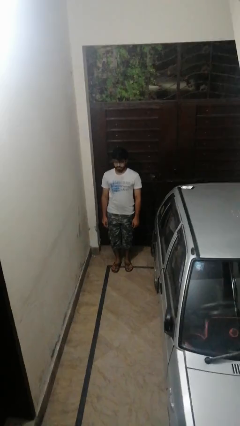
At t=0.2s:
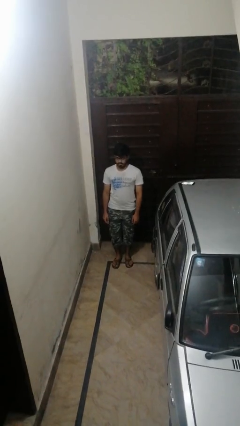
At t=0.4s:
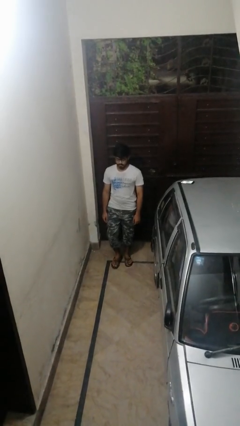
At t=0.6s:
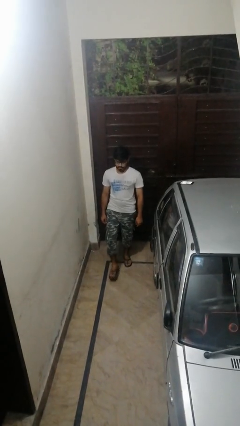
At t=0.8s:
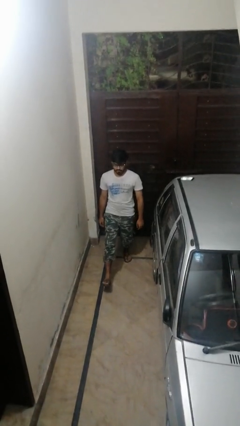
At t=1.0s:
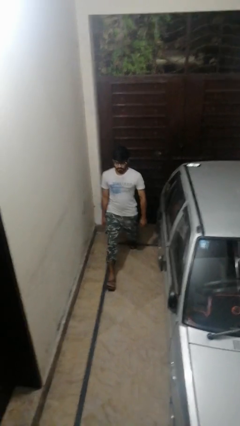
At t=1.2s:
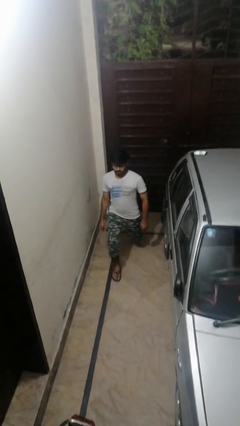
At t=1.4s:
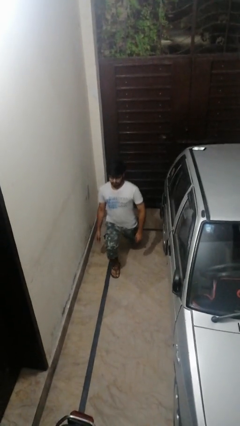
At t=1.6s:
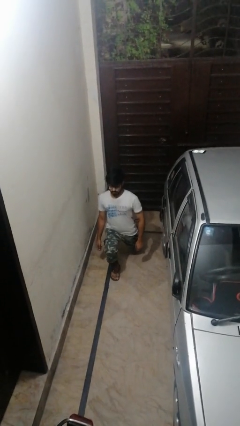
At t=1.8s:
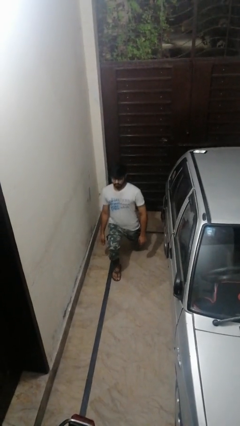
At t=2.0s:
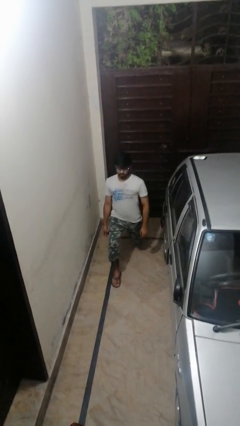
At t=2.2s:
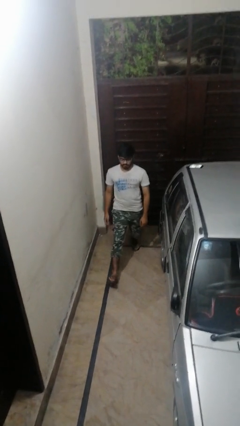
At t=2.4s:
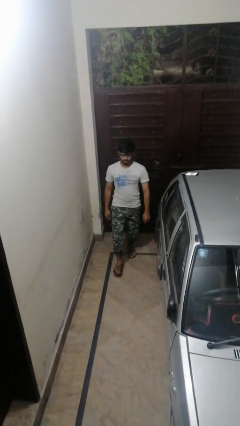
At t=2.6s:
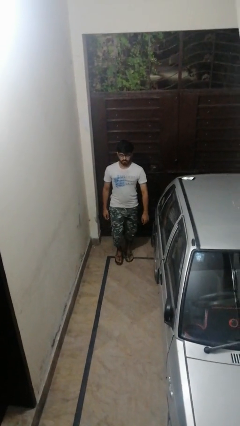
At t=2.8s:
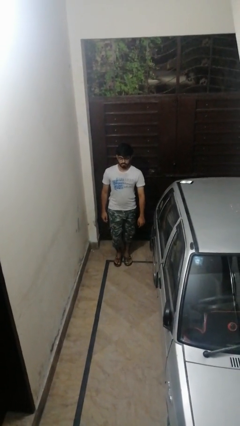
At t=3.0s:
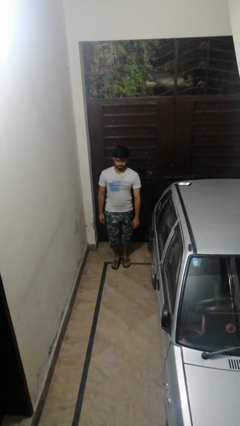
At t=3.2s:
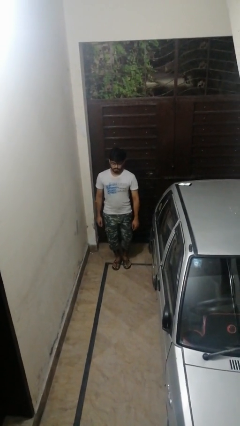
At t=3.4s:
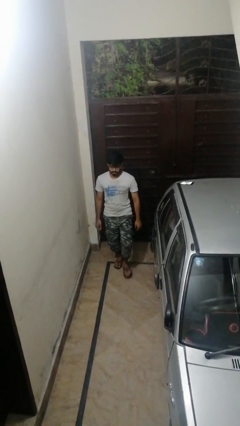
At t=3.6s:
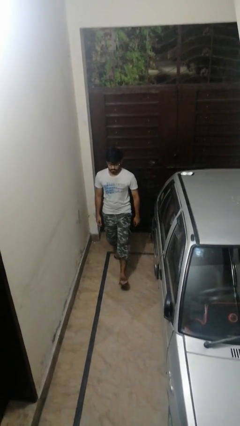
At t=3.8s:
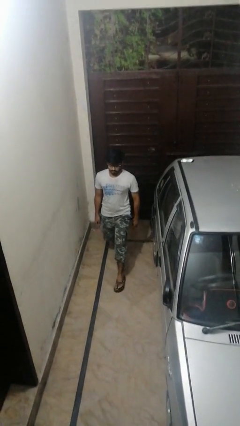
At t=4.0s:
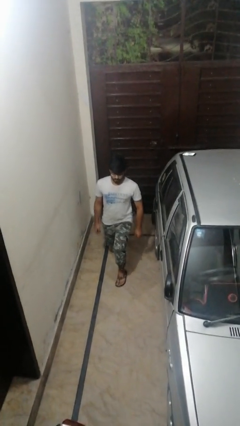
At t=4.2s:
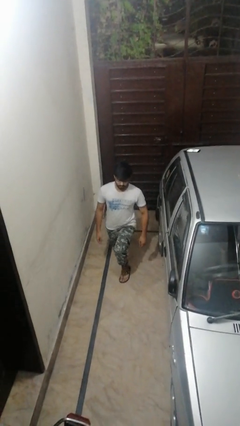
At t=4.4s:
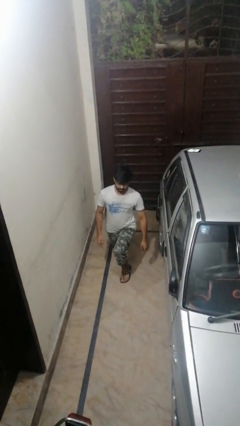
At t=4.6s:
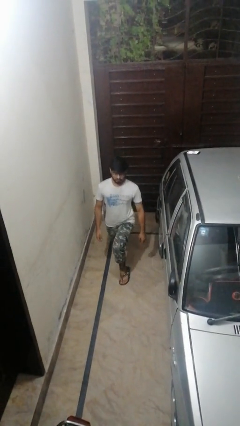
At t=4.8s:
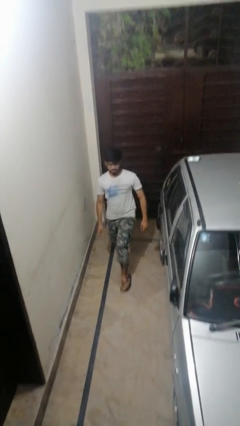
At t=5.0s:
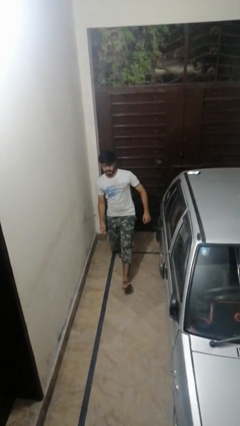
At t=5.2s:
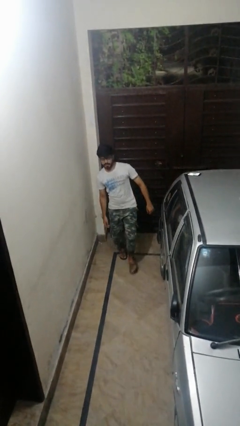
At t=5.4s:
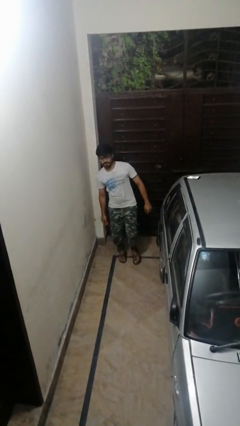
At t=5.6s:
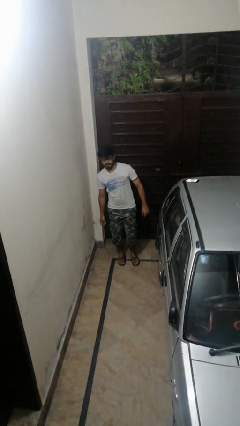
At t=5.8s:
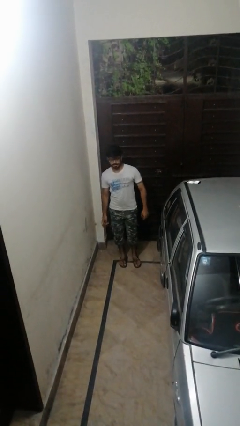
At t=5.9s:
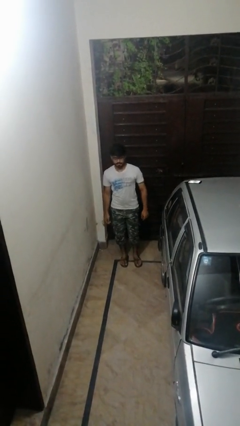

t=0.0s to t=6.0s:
person exercises with lunges

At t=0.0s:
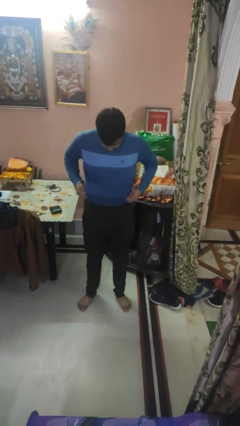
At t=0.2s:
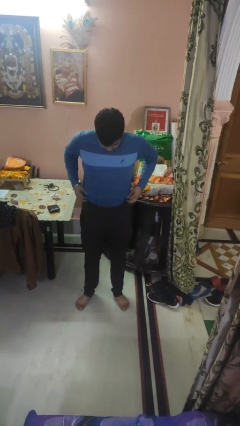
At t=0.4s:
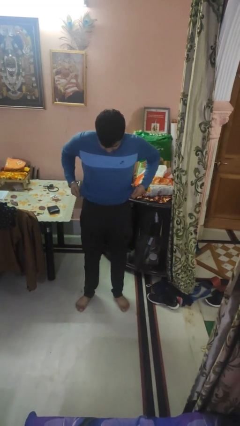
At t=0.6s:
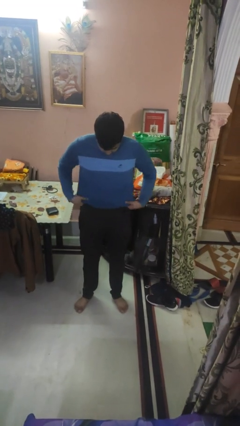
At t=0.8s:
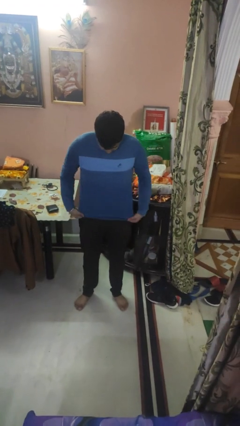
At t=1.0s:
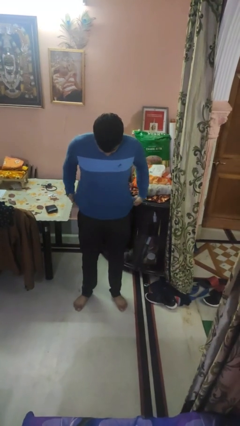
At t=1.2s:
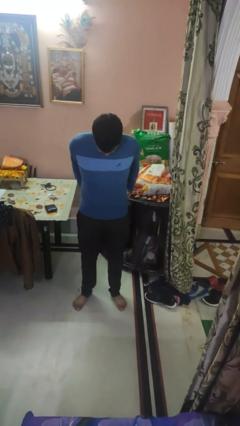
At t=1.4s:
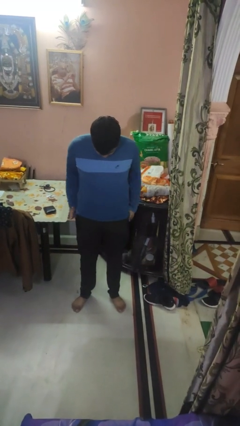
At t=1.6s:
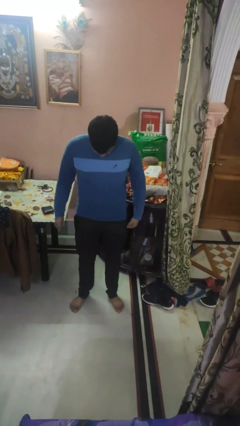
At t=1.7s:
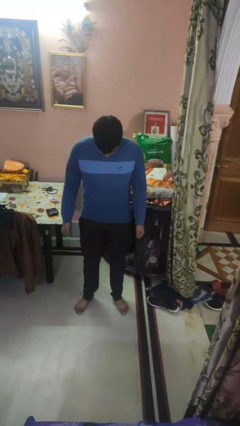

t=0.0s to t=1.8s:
person untucks shirt

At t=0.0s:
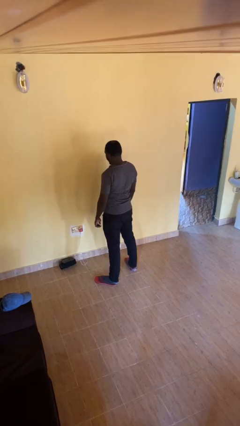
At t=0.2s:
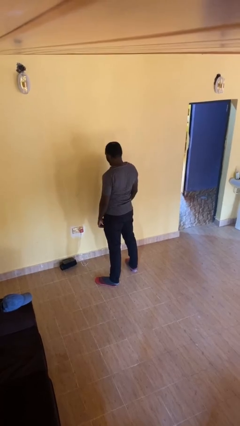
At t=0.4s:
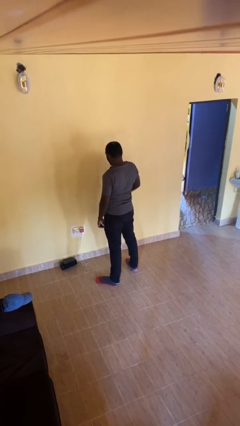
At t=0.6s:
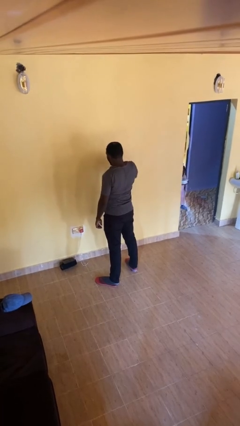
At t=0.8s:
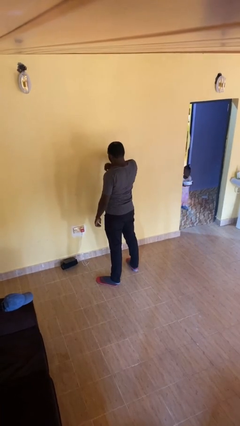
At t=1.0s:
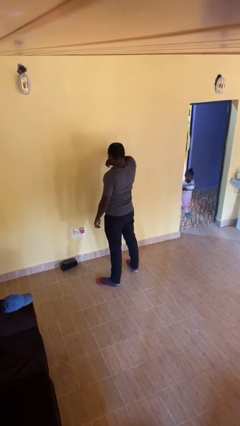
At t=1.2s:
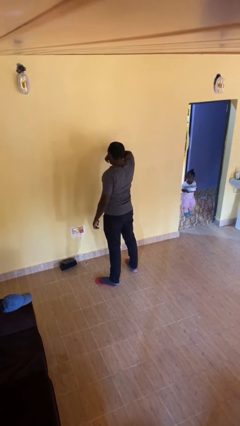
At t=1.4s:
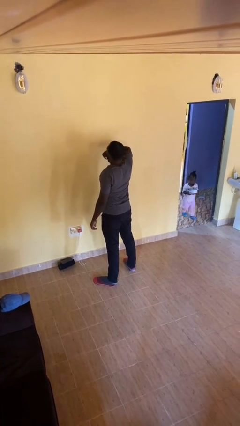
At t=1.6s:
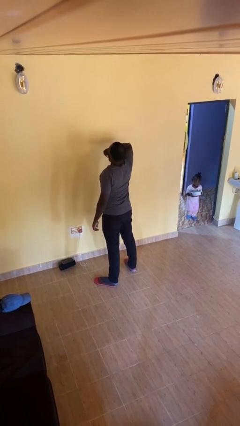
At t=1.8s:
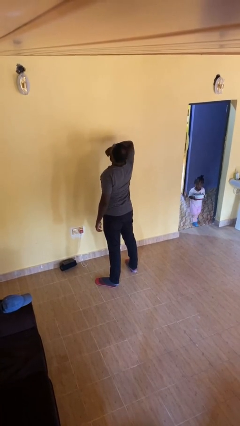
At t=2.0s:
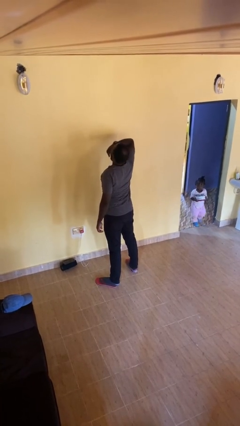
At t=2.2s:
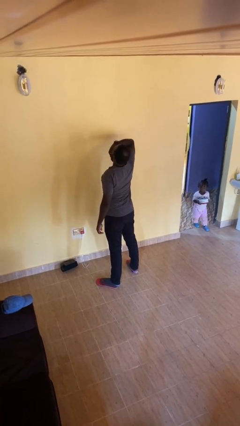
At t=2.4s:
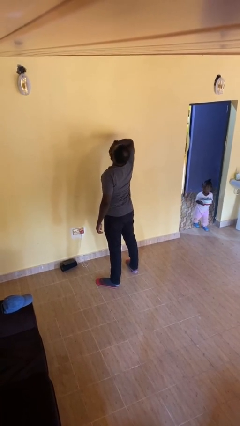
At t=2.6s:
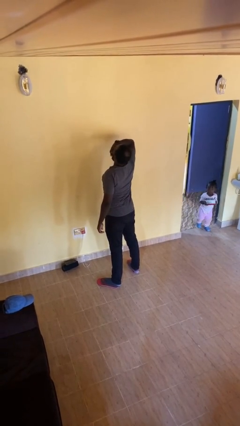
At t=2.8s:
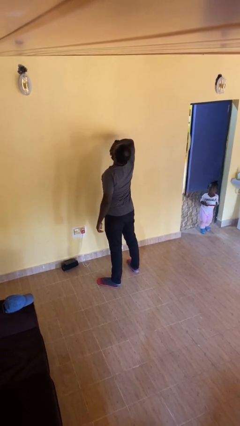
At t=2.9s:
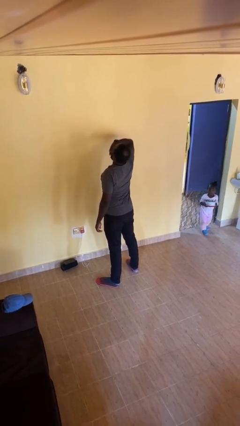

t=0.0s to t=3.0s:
person yawns

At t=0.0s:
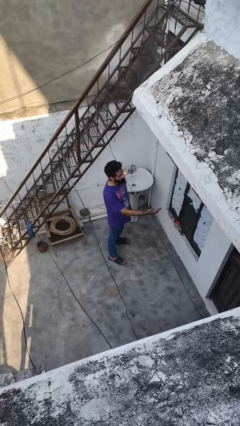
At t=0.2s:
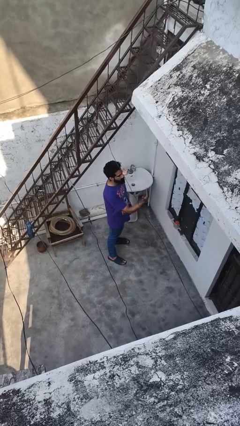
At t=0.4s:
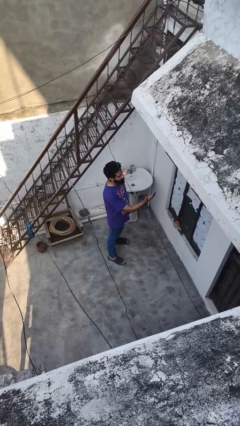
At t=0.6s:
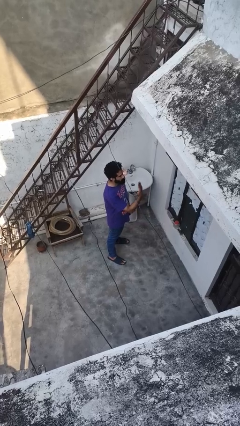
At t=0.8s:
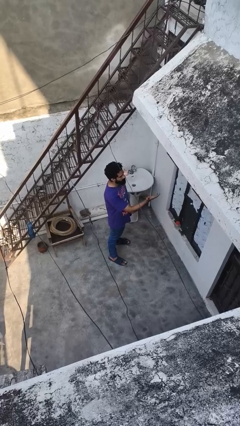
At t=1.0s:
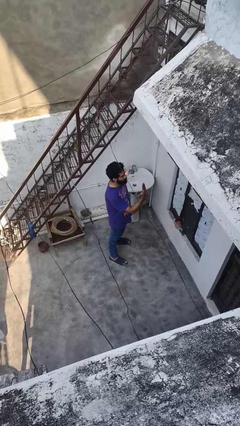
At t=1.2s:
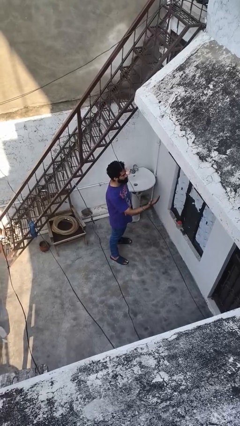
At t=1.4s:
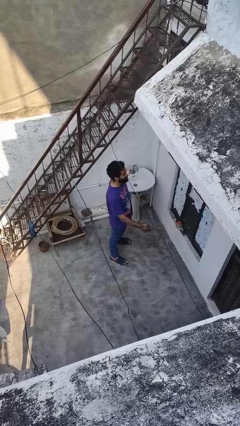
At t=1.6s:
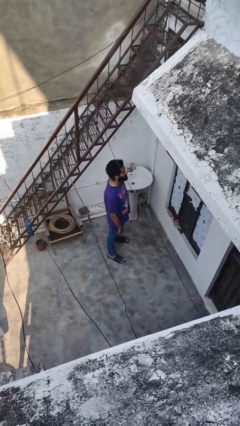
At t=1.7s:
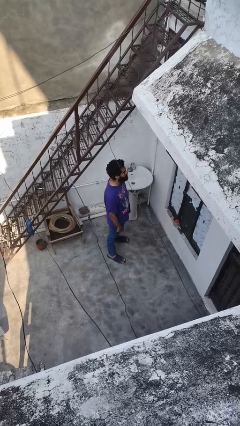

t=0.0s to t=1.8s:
person gestures come here

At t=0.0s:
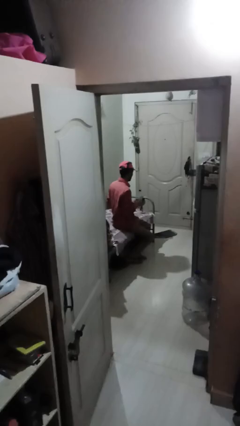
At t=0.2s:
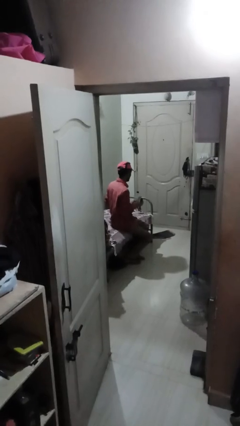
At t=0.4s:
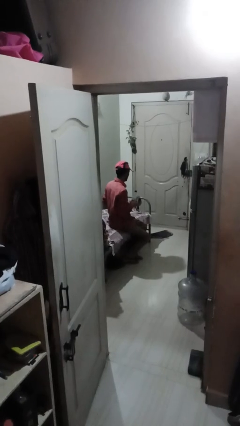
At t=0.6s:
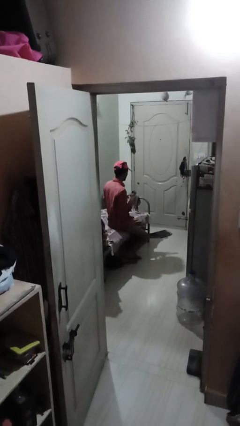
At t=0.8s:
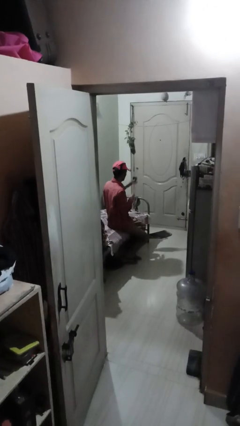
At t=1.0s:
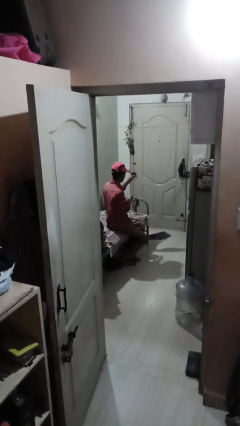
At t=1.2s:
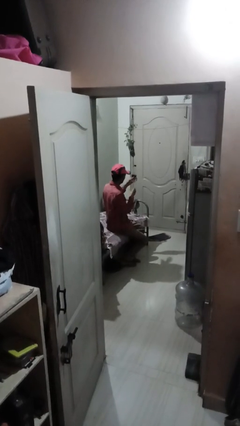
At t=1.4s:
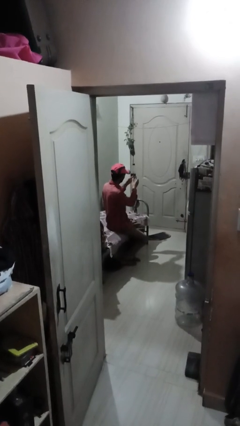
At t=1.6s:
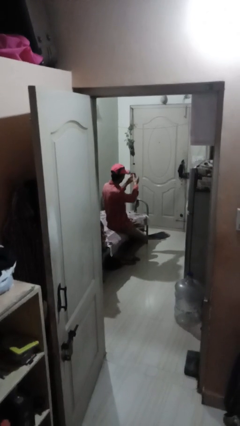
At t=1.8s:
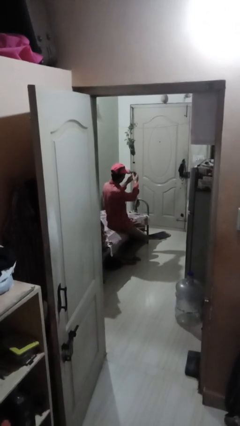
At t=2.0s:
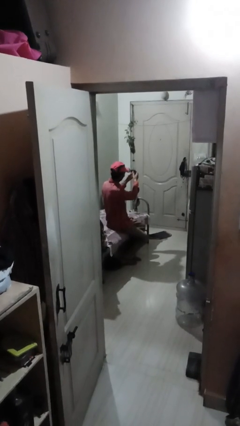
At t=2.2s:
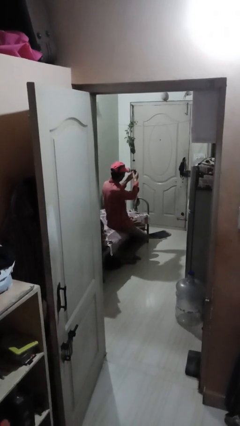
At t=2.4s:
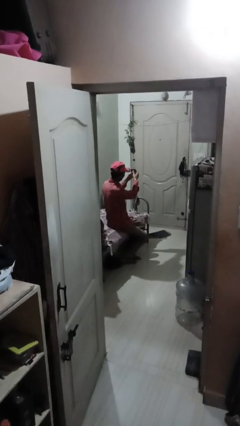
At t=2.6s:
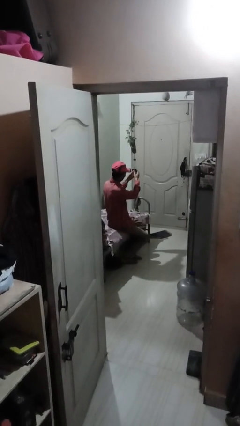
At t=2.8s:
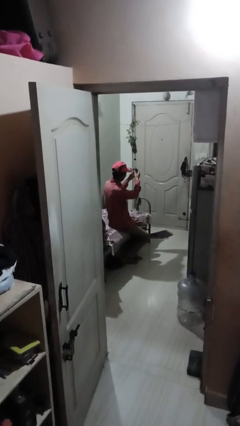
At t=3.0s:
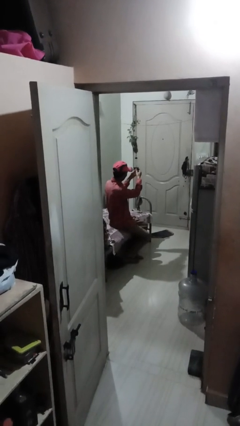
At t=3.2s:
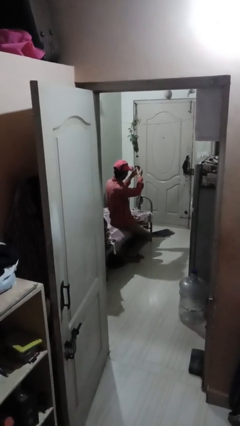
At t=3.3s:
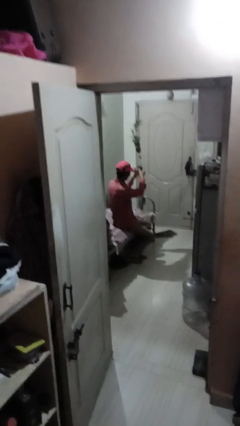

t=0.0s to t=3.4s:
person squeezes object

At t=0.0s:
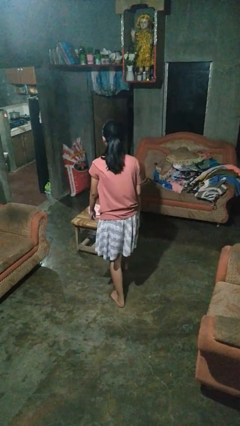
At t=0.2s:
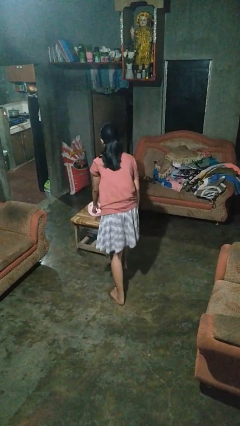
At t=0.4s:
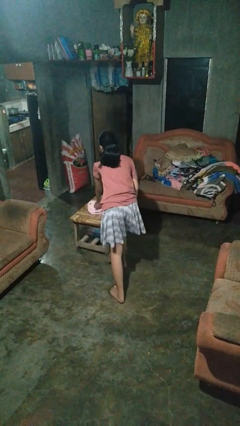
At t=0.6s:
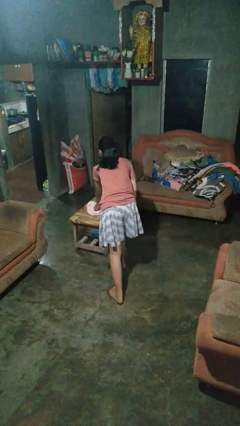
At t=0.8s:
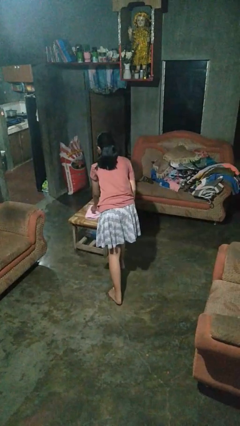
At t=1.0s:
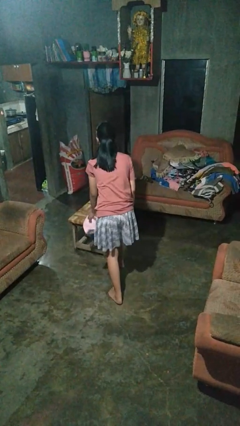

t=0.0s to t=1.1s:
person picks up object from table

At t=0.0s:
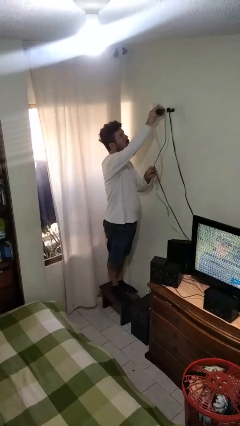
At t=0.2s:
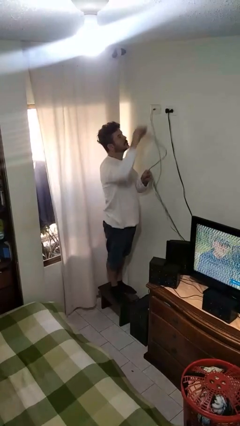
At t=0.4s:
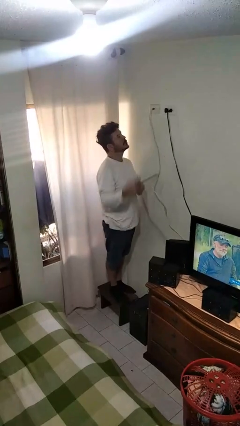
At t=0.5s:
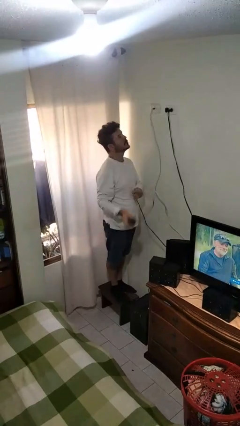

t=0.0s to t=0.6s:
person unplugs from electrical socket
